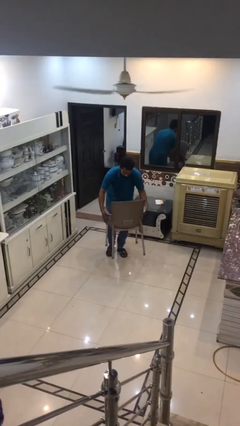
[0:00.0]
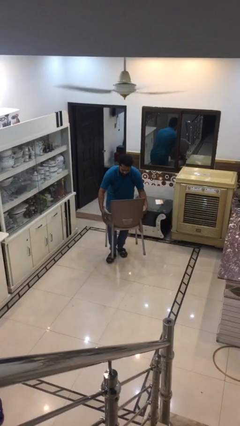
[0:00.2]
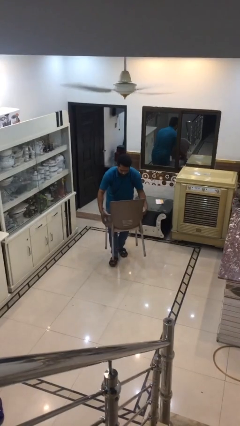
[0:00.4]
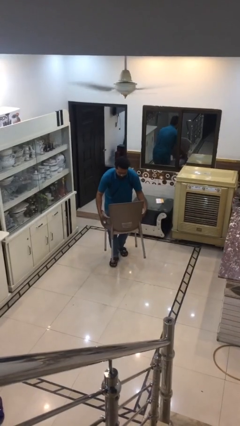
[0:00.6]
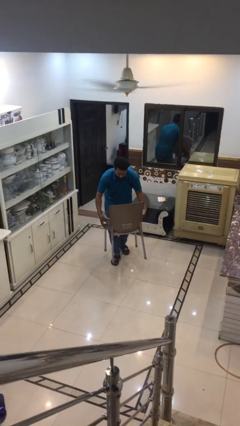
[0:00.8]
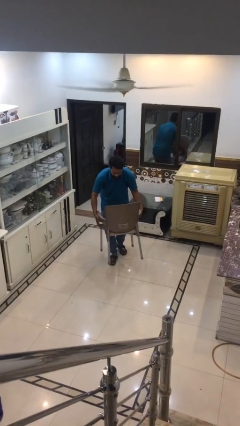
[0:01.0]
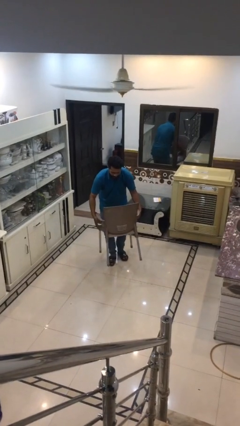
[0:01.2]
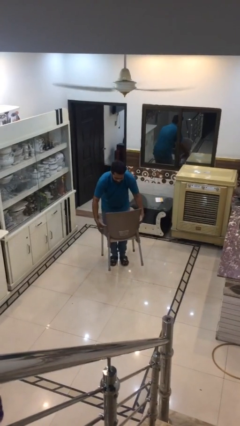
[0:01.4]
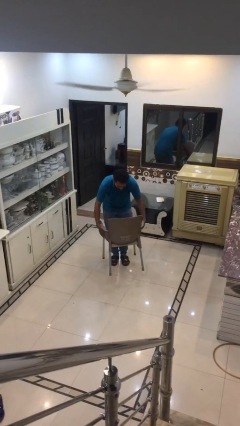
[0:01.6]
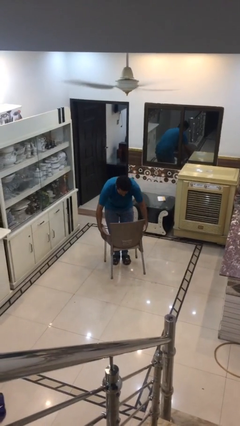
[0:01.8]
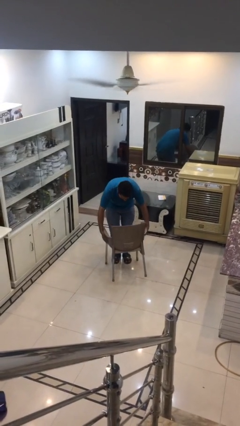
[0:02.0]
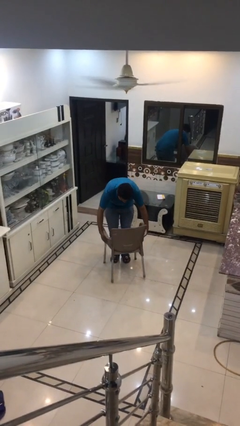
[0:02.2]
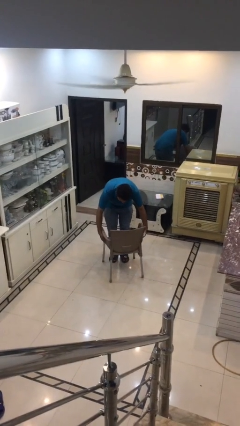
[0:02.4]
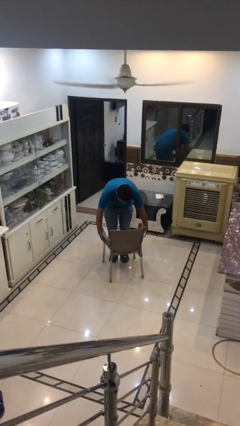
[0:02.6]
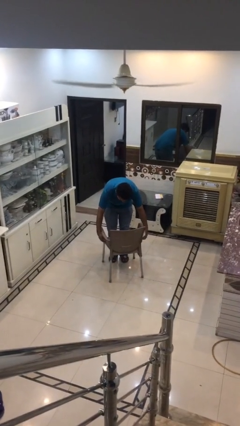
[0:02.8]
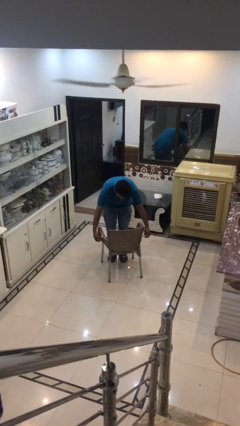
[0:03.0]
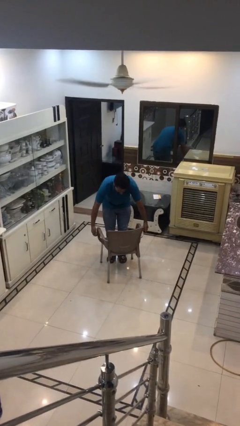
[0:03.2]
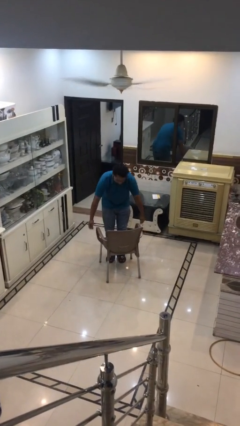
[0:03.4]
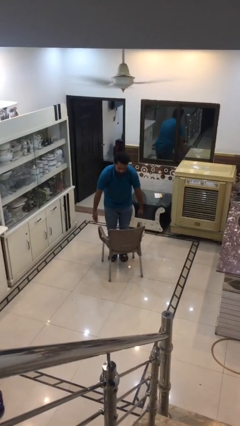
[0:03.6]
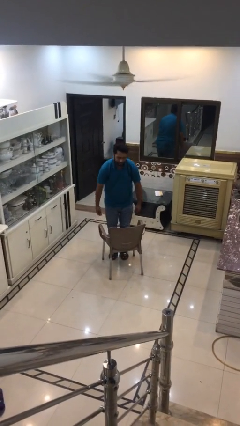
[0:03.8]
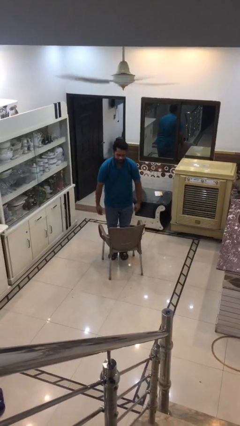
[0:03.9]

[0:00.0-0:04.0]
person puts down object on floor

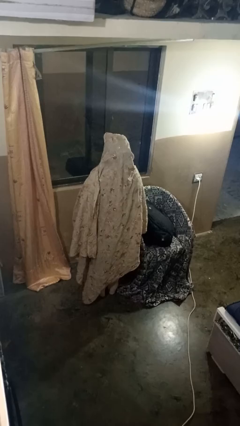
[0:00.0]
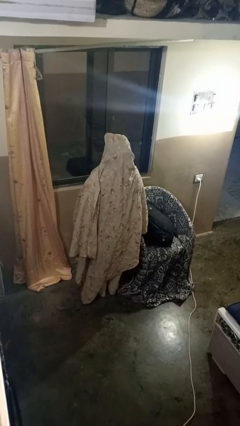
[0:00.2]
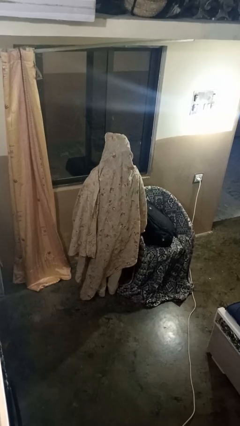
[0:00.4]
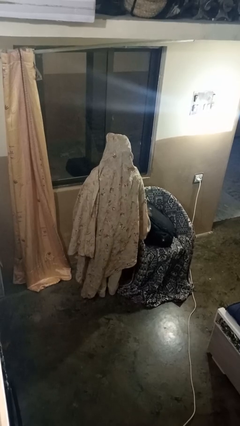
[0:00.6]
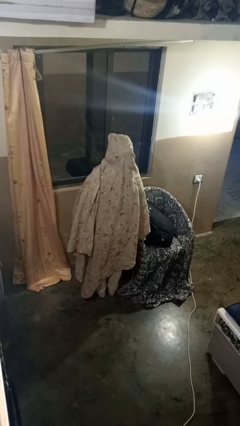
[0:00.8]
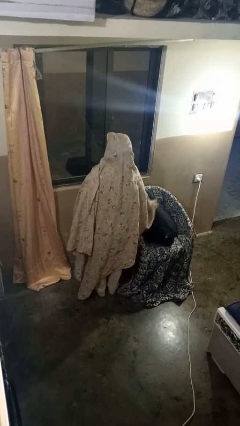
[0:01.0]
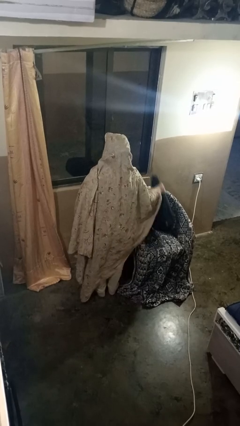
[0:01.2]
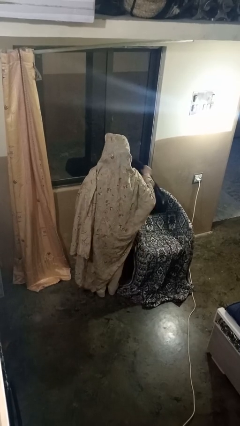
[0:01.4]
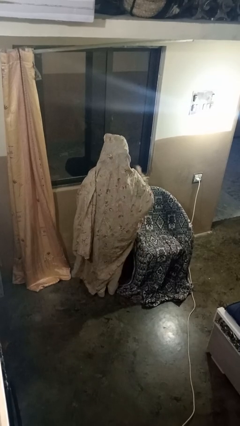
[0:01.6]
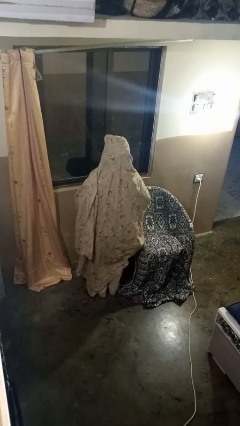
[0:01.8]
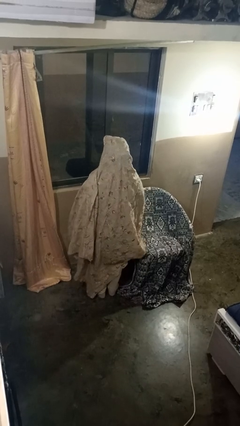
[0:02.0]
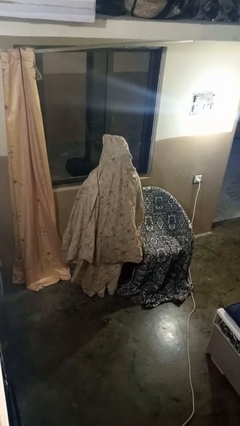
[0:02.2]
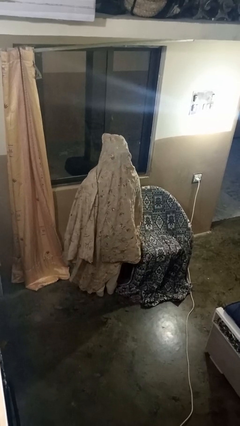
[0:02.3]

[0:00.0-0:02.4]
person picks up object from couch

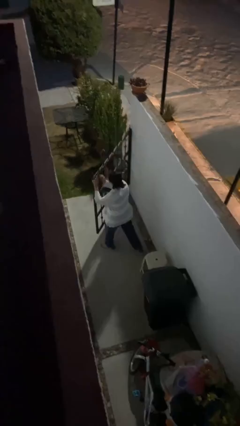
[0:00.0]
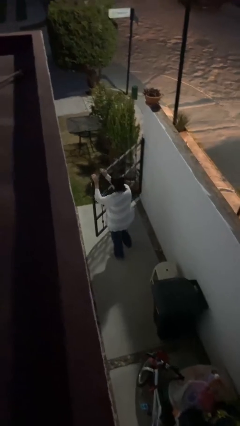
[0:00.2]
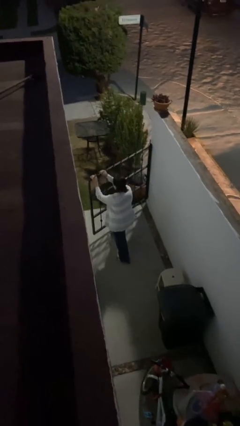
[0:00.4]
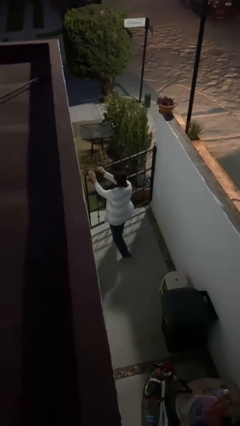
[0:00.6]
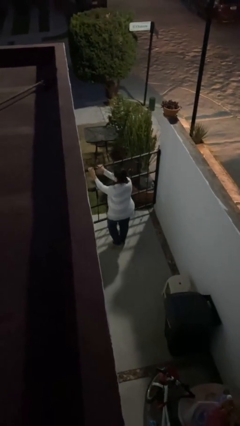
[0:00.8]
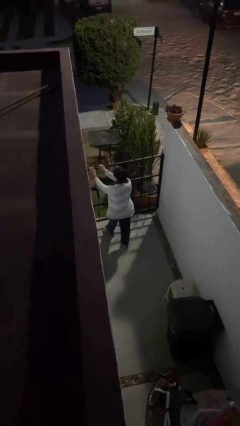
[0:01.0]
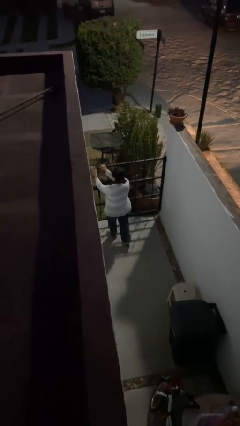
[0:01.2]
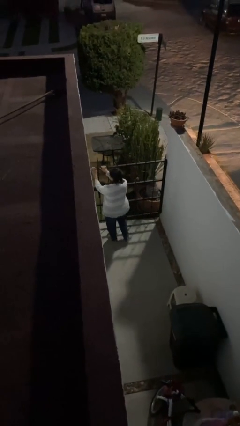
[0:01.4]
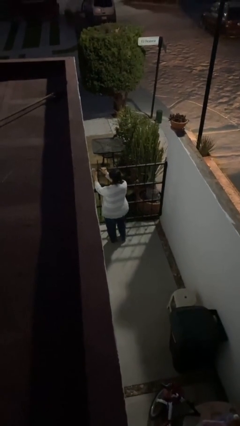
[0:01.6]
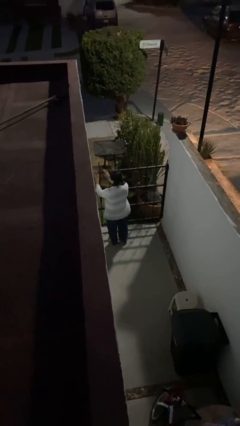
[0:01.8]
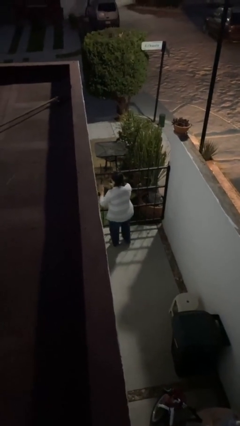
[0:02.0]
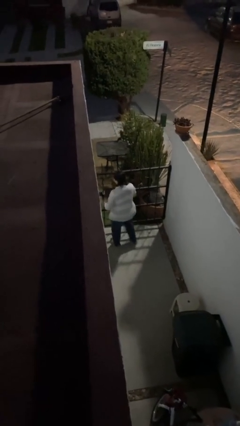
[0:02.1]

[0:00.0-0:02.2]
person closes facility door

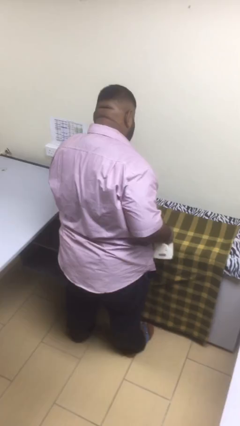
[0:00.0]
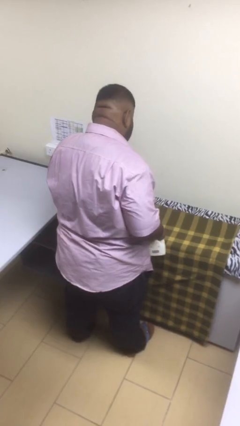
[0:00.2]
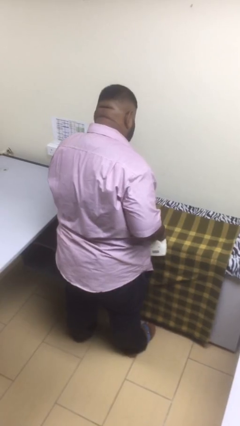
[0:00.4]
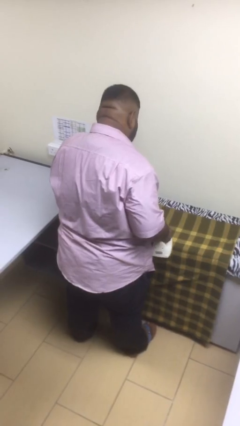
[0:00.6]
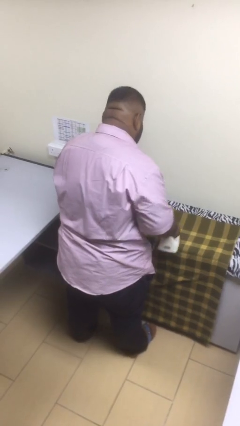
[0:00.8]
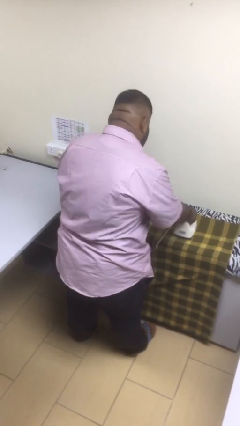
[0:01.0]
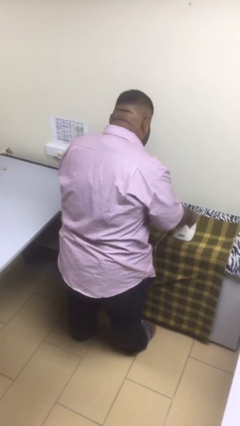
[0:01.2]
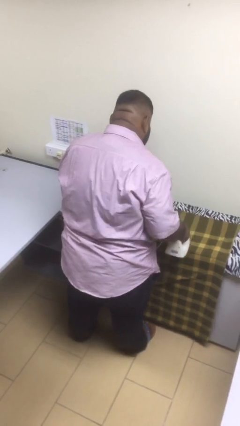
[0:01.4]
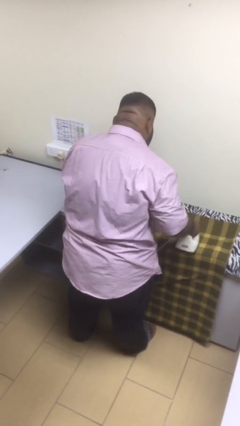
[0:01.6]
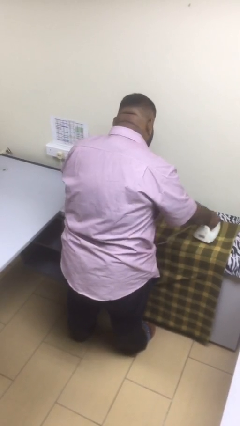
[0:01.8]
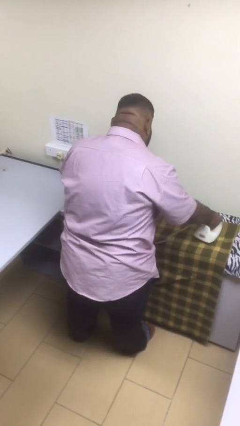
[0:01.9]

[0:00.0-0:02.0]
person irons clothes

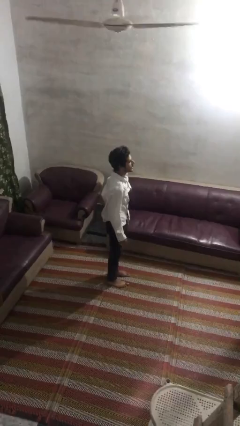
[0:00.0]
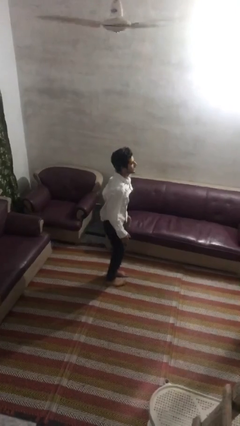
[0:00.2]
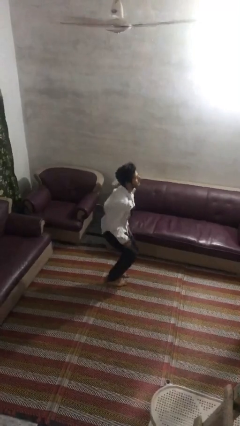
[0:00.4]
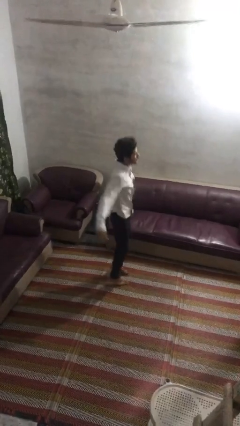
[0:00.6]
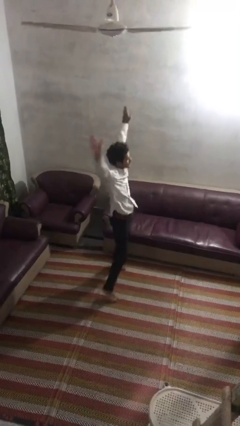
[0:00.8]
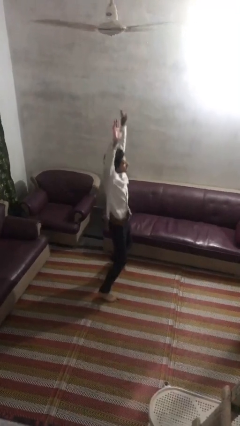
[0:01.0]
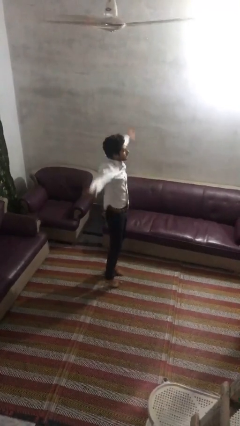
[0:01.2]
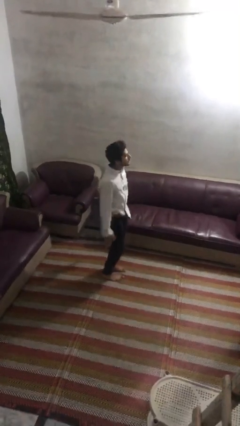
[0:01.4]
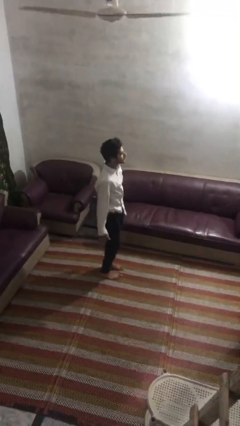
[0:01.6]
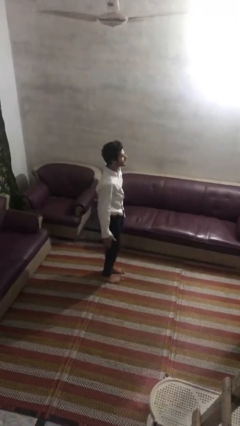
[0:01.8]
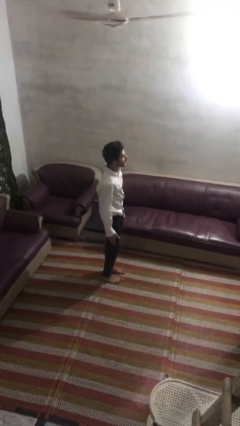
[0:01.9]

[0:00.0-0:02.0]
person exercises with jumping jacks

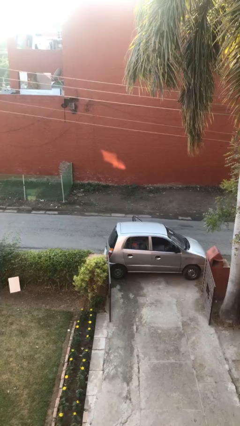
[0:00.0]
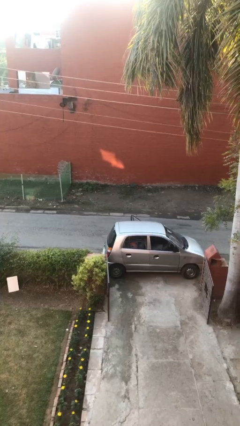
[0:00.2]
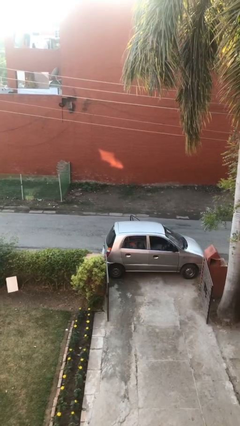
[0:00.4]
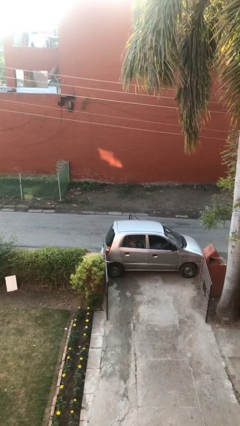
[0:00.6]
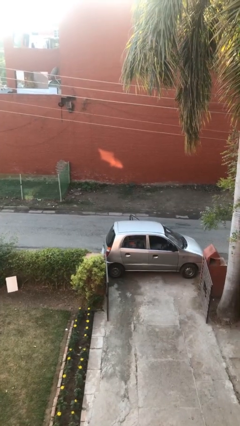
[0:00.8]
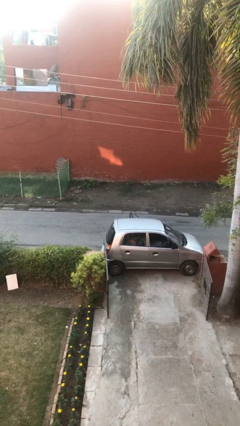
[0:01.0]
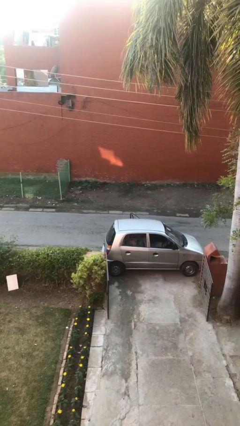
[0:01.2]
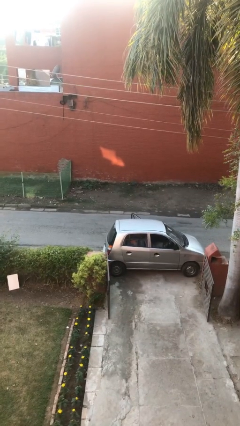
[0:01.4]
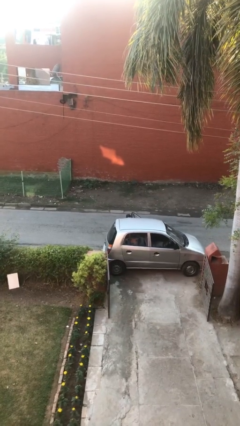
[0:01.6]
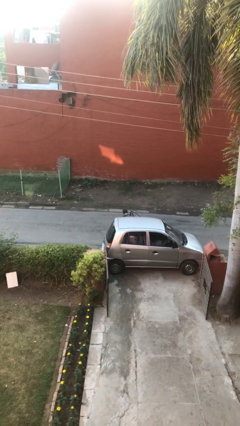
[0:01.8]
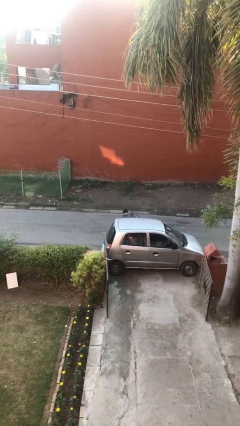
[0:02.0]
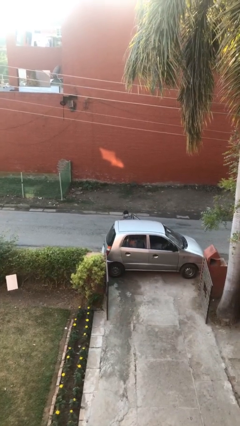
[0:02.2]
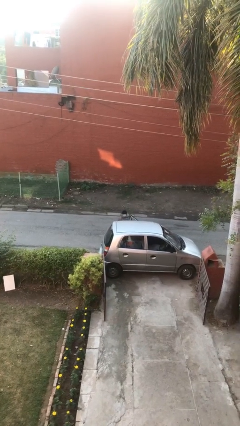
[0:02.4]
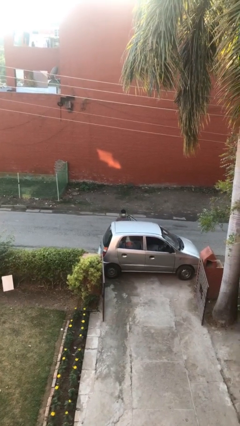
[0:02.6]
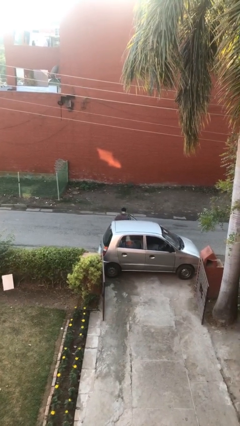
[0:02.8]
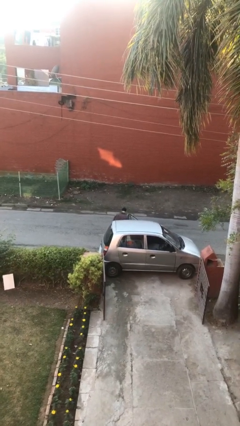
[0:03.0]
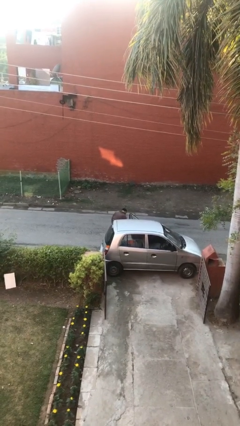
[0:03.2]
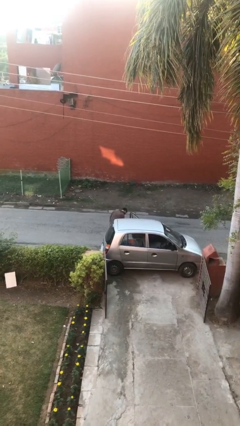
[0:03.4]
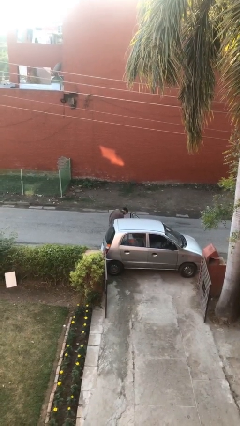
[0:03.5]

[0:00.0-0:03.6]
person exits car

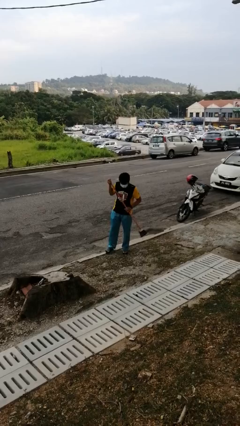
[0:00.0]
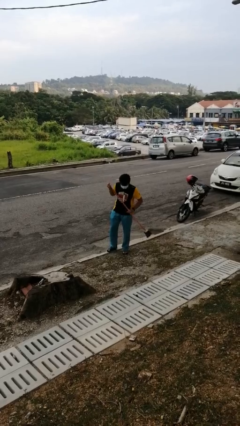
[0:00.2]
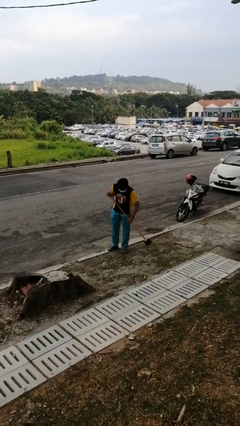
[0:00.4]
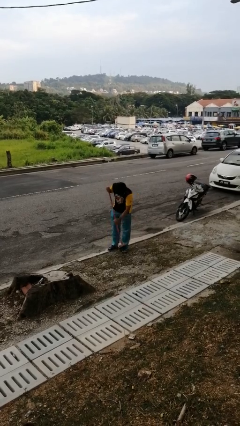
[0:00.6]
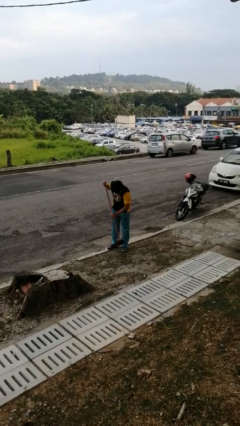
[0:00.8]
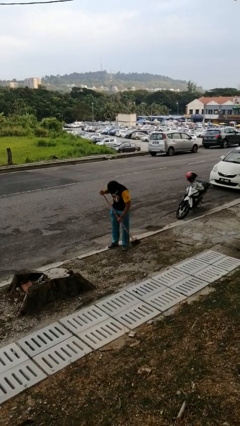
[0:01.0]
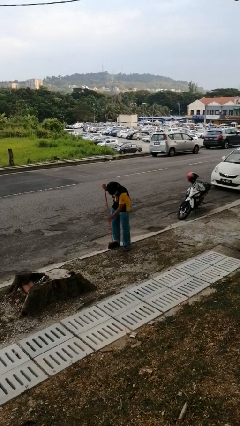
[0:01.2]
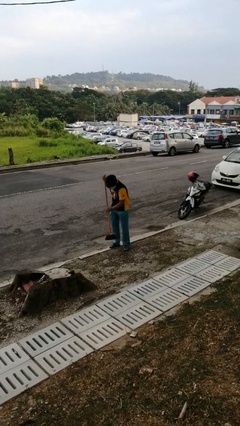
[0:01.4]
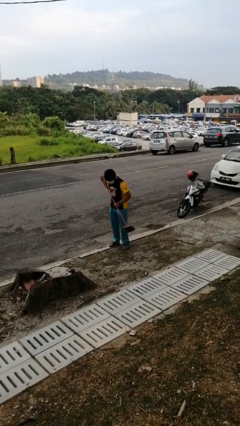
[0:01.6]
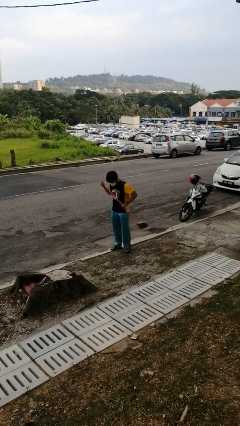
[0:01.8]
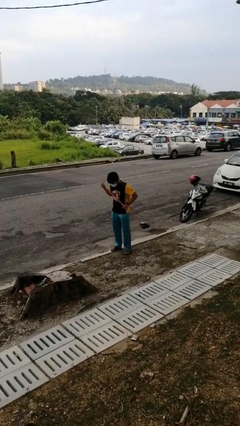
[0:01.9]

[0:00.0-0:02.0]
person sweeps floor
